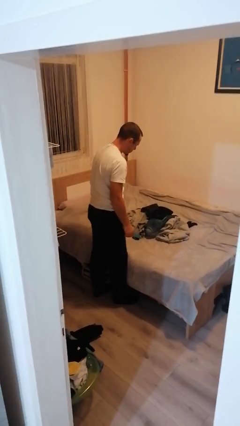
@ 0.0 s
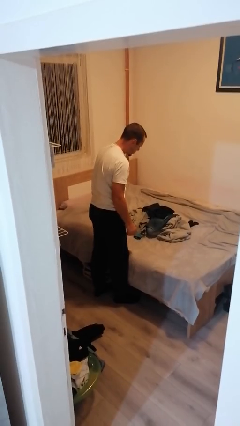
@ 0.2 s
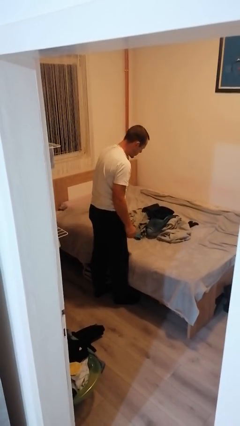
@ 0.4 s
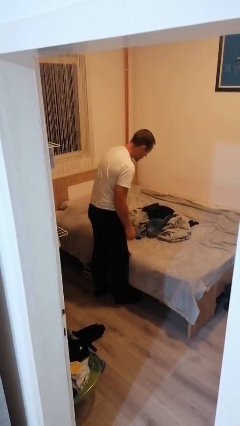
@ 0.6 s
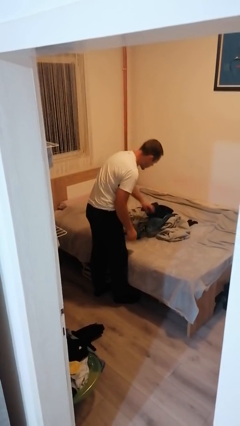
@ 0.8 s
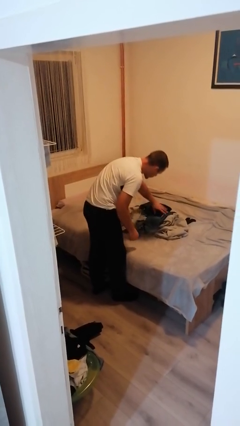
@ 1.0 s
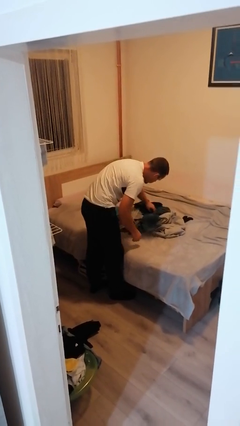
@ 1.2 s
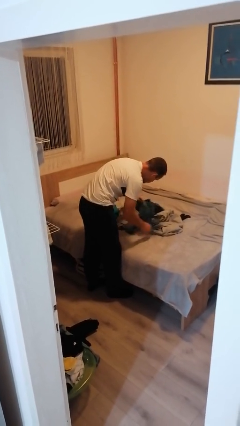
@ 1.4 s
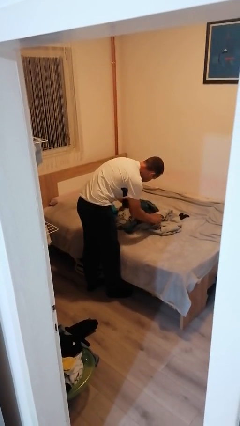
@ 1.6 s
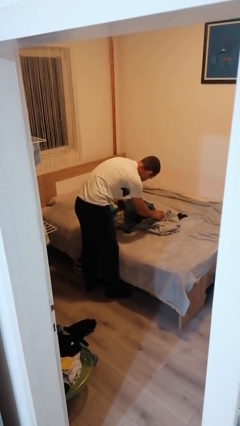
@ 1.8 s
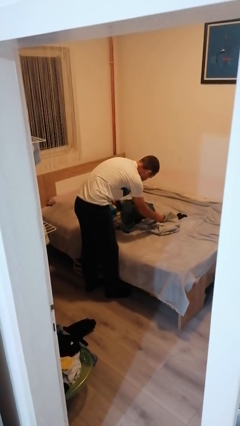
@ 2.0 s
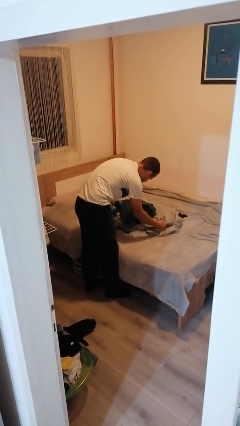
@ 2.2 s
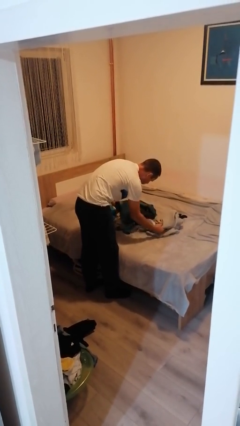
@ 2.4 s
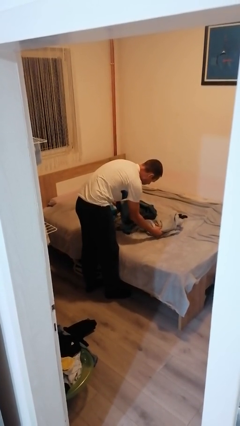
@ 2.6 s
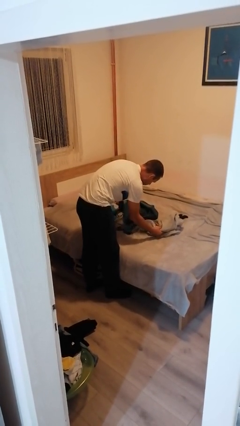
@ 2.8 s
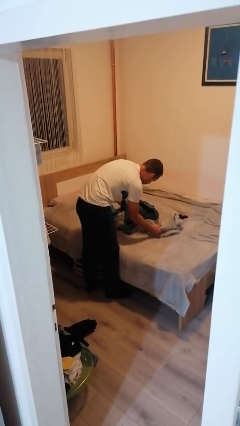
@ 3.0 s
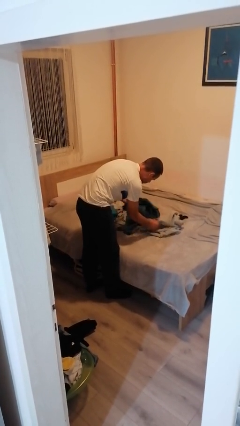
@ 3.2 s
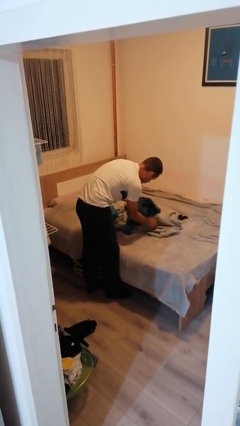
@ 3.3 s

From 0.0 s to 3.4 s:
person searches under bed

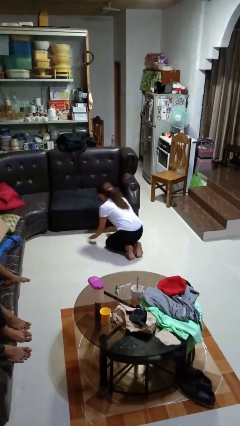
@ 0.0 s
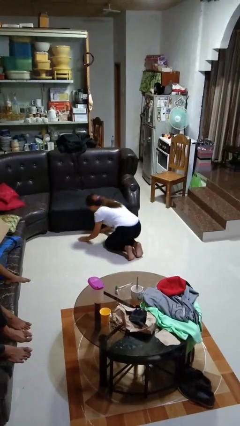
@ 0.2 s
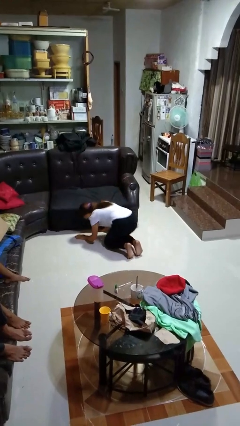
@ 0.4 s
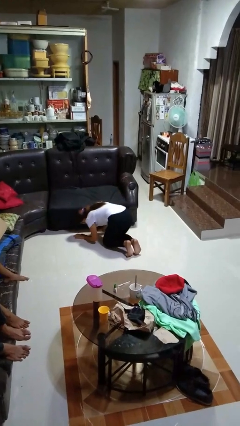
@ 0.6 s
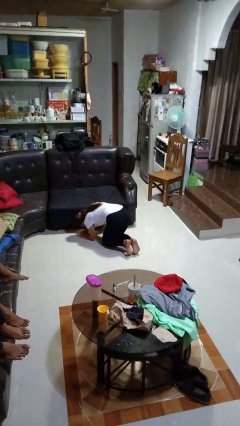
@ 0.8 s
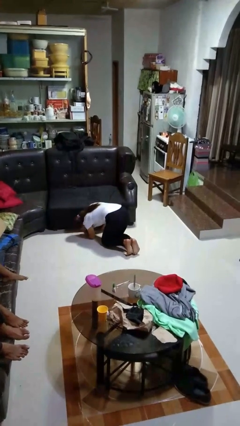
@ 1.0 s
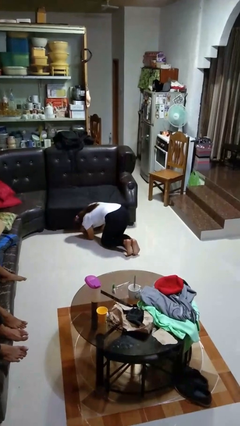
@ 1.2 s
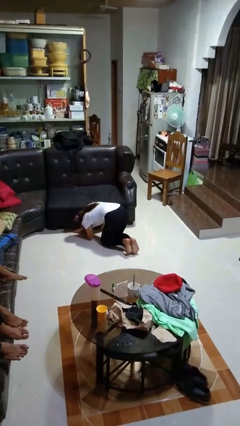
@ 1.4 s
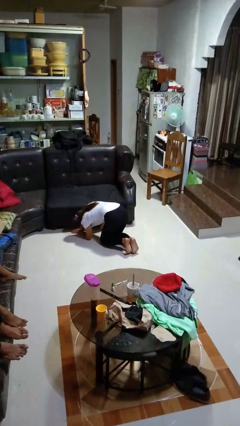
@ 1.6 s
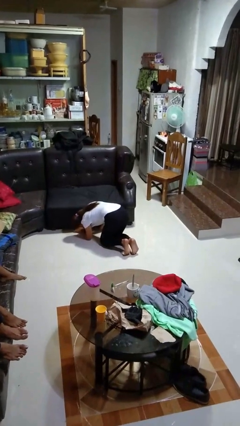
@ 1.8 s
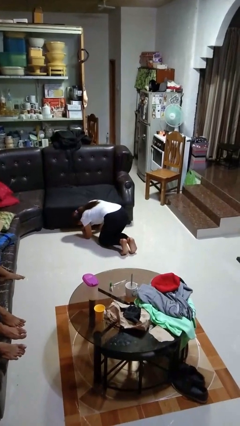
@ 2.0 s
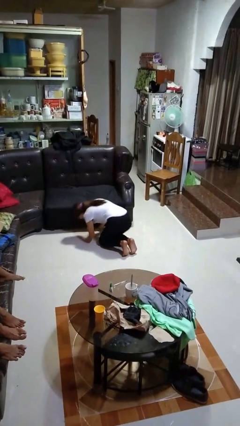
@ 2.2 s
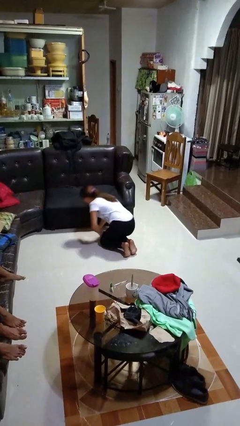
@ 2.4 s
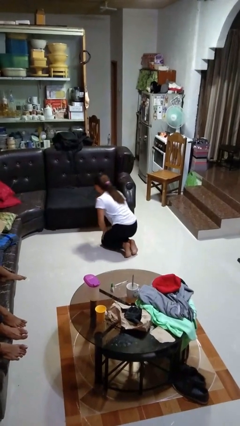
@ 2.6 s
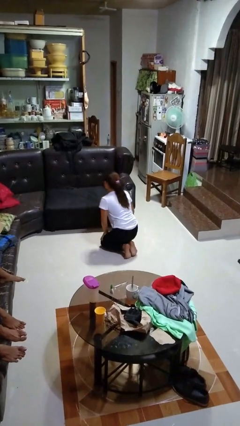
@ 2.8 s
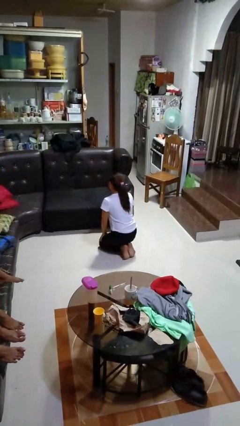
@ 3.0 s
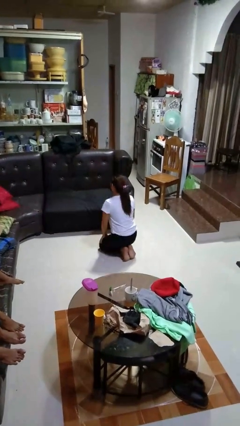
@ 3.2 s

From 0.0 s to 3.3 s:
person searches under couch

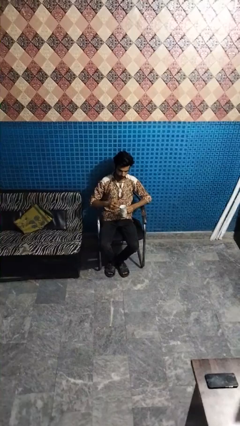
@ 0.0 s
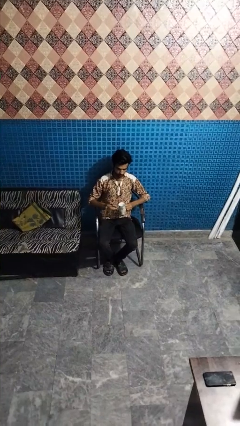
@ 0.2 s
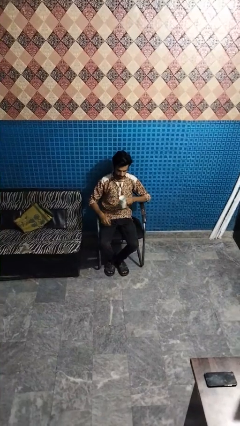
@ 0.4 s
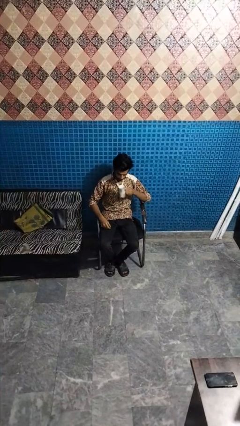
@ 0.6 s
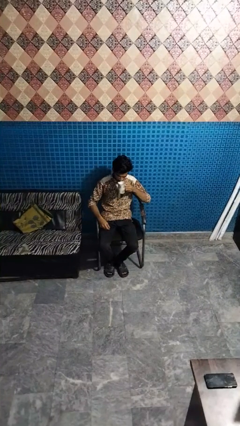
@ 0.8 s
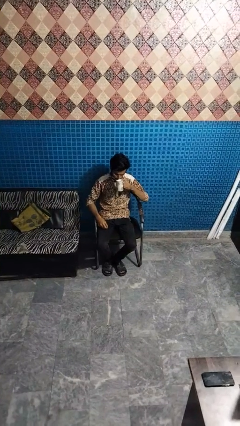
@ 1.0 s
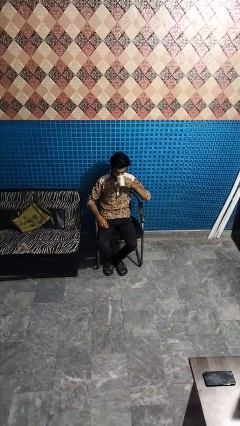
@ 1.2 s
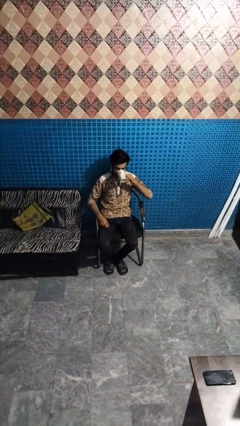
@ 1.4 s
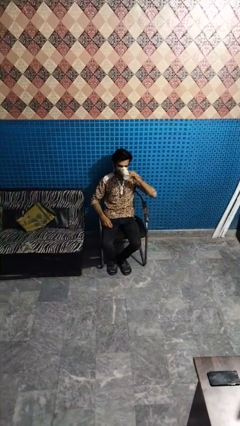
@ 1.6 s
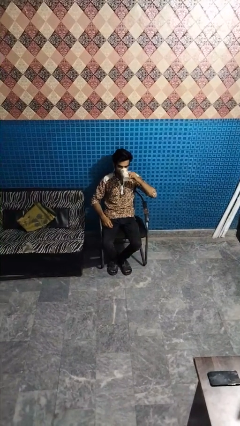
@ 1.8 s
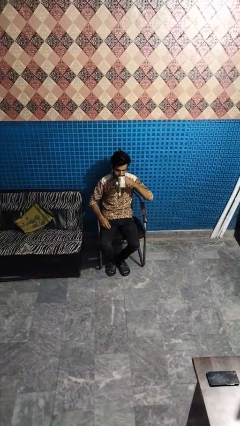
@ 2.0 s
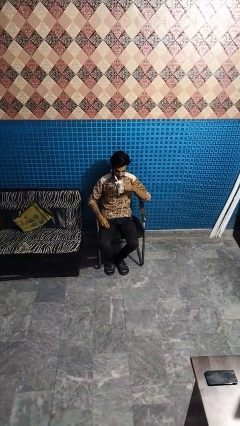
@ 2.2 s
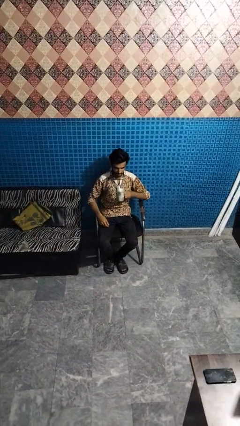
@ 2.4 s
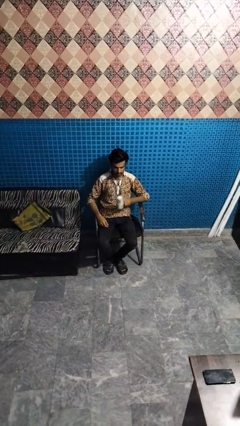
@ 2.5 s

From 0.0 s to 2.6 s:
person drinks from mug

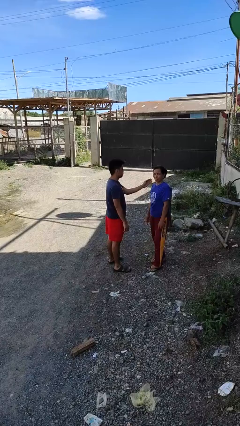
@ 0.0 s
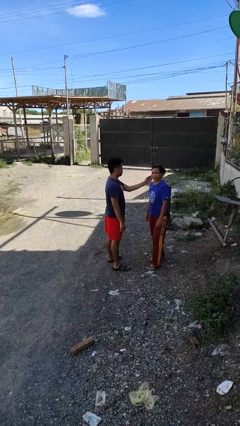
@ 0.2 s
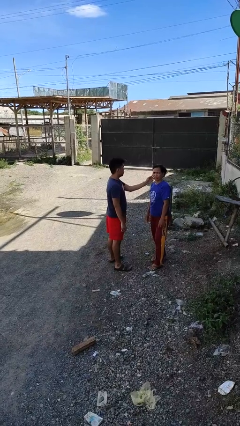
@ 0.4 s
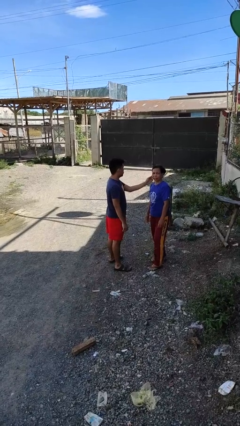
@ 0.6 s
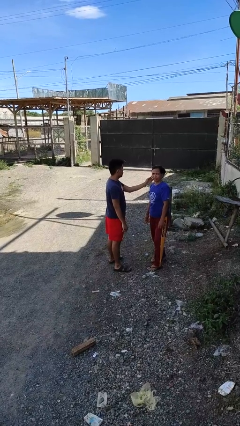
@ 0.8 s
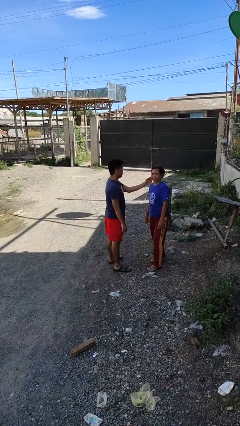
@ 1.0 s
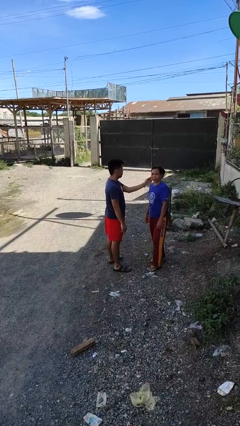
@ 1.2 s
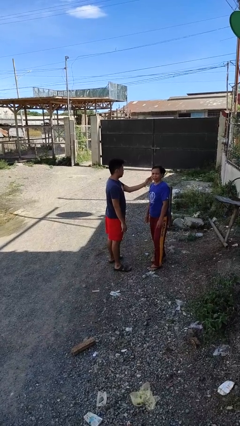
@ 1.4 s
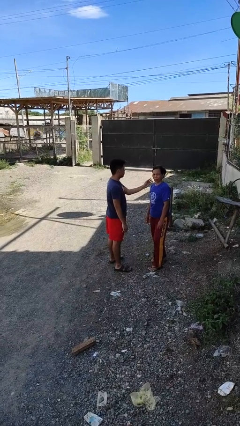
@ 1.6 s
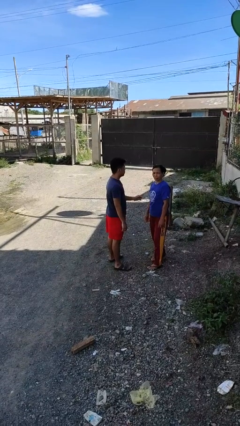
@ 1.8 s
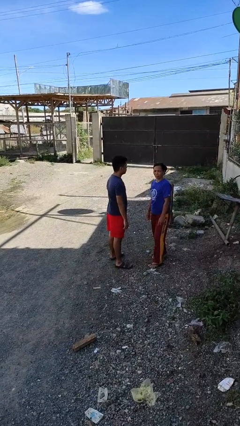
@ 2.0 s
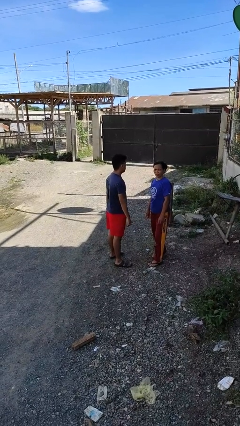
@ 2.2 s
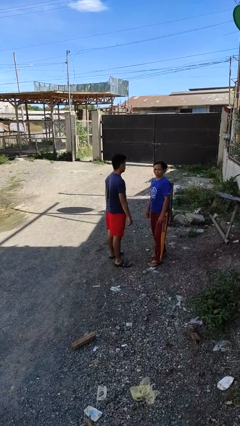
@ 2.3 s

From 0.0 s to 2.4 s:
person touches face of person

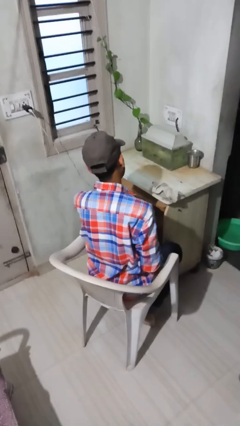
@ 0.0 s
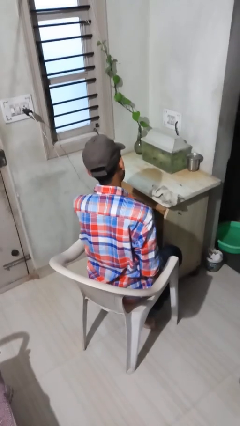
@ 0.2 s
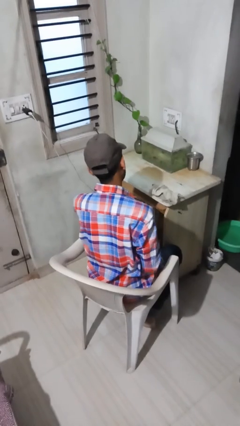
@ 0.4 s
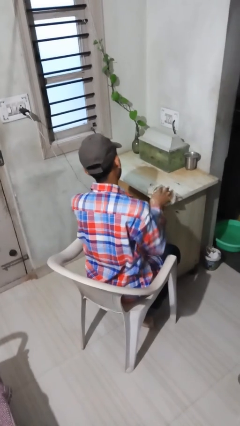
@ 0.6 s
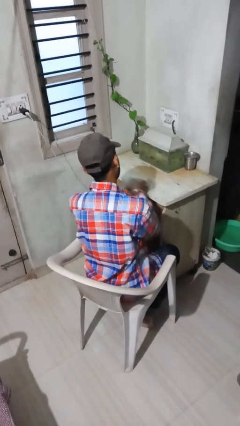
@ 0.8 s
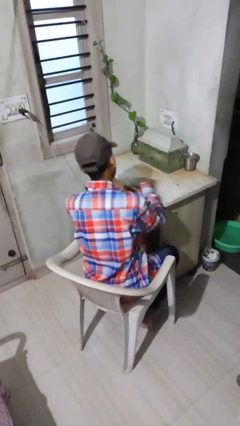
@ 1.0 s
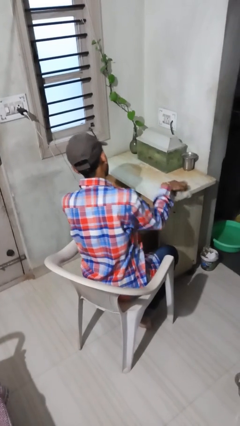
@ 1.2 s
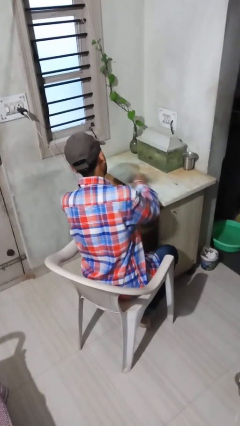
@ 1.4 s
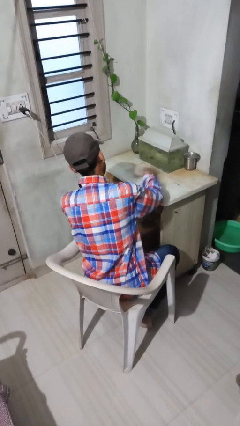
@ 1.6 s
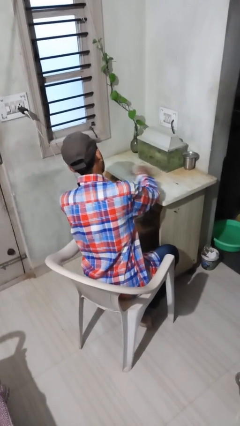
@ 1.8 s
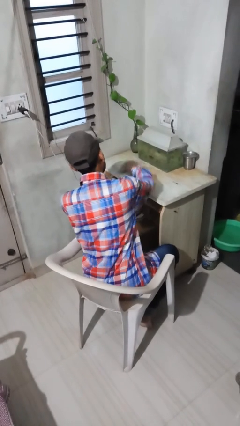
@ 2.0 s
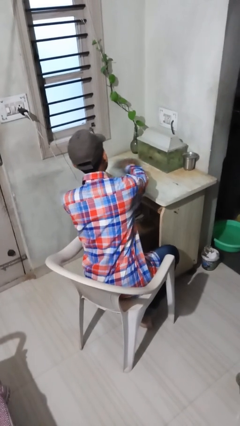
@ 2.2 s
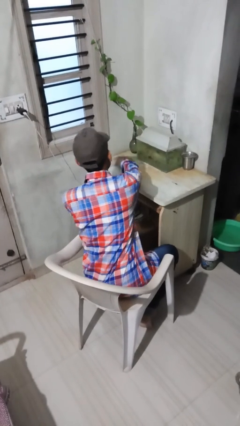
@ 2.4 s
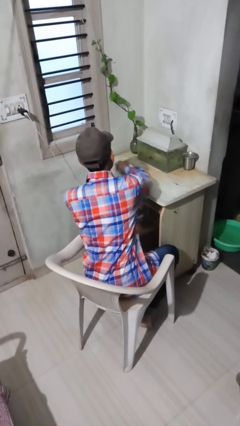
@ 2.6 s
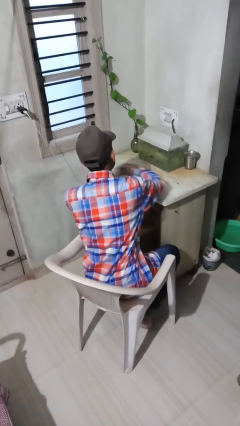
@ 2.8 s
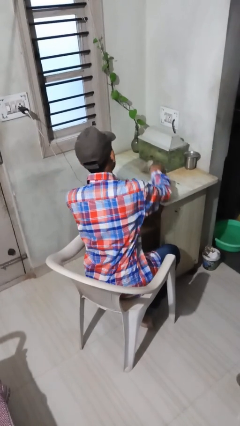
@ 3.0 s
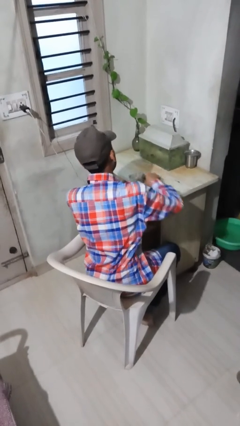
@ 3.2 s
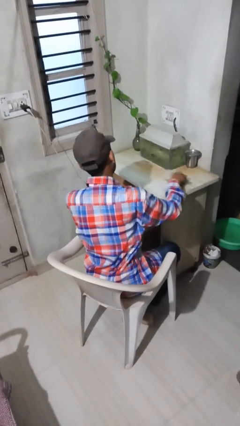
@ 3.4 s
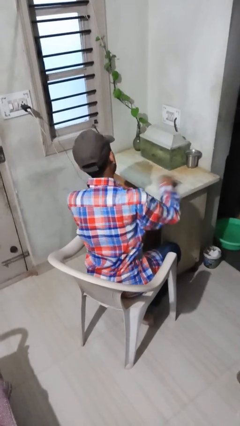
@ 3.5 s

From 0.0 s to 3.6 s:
person cleans table with rag

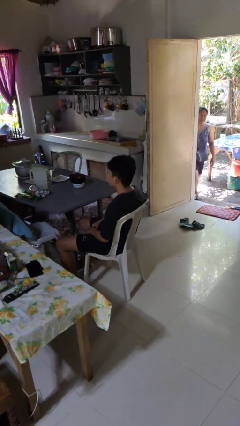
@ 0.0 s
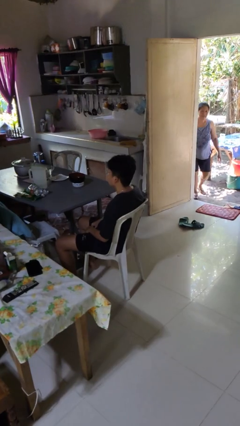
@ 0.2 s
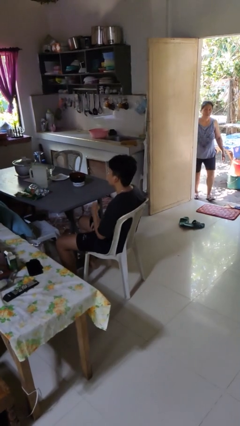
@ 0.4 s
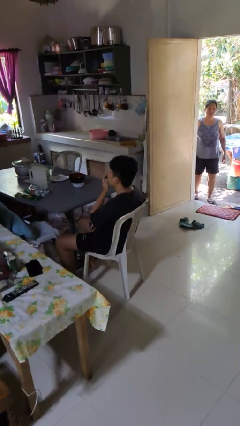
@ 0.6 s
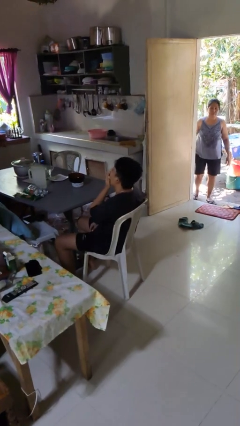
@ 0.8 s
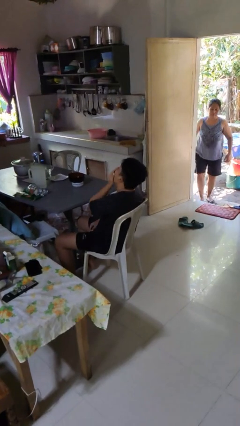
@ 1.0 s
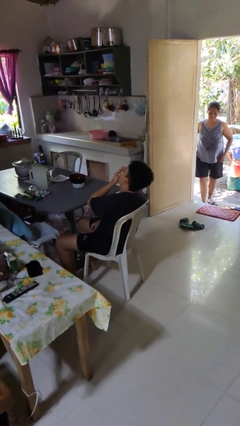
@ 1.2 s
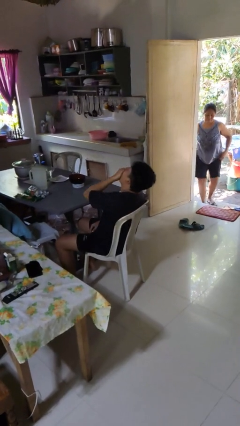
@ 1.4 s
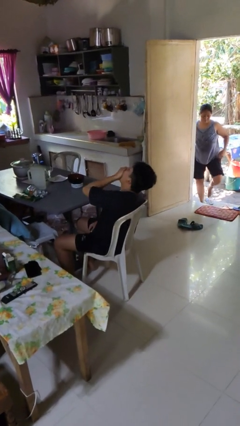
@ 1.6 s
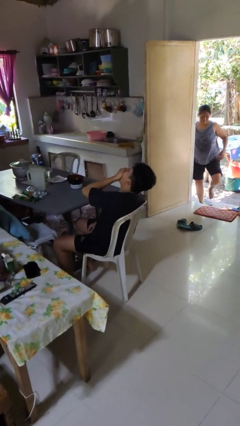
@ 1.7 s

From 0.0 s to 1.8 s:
person yawns

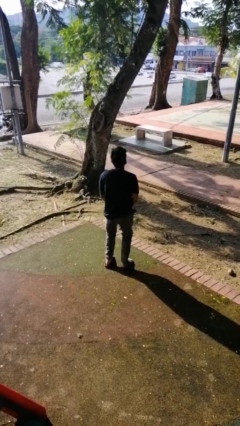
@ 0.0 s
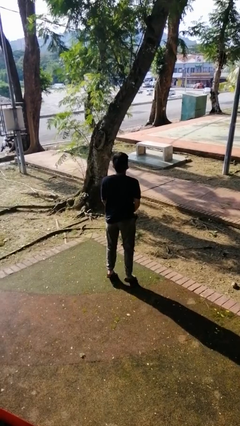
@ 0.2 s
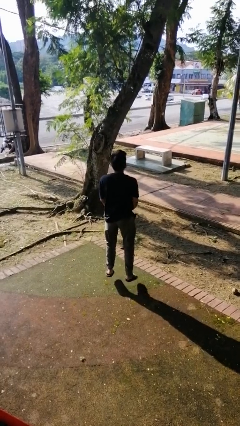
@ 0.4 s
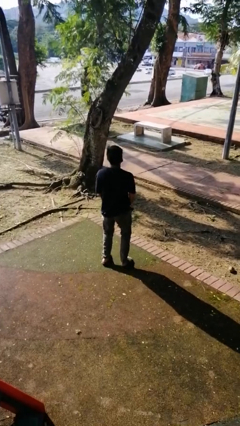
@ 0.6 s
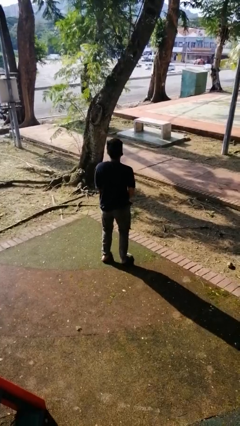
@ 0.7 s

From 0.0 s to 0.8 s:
person jumps
